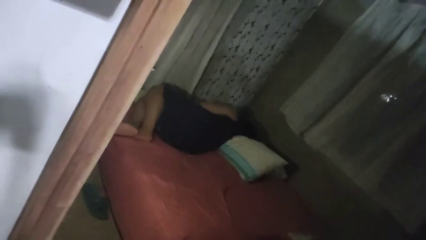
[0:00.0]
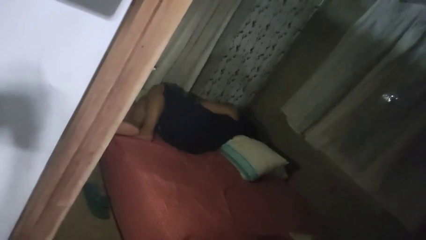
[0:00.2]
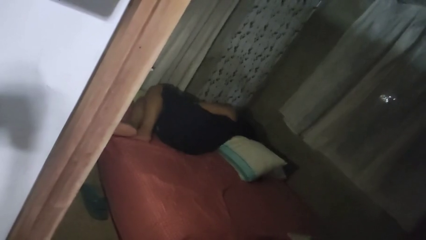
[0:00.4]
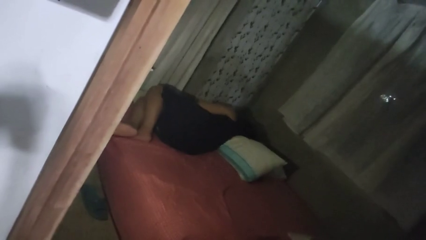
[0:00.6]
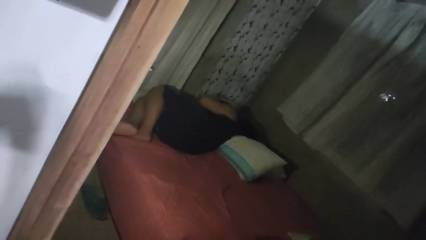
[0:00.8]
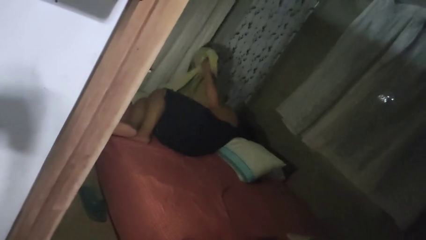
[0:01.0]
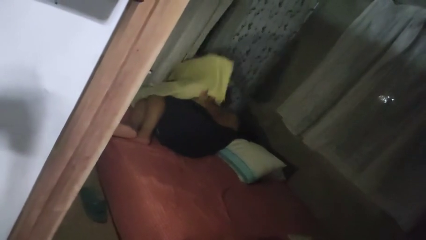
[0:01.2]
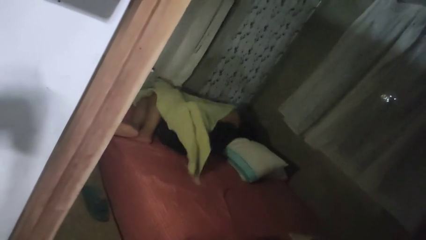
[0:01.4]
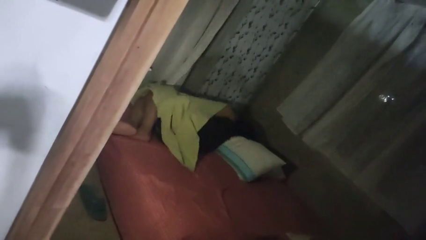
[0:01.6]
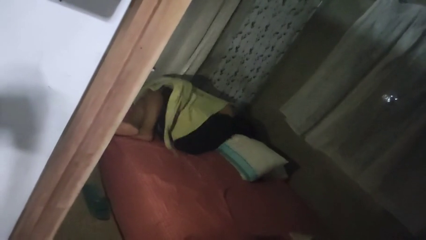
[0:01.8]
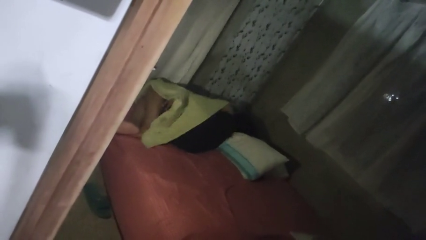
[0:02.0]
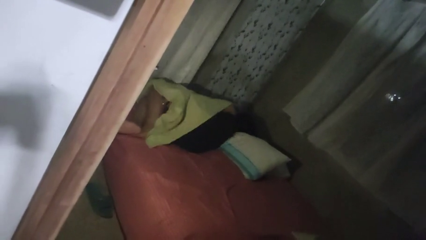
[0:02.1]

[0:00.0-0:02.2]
person covers with bedsheets

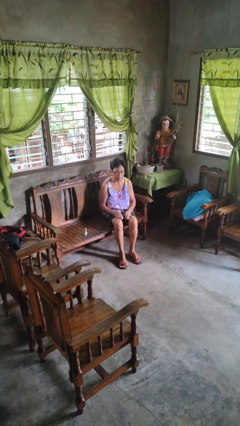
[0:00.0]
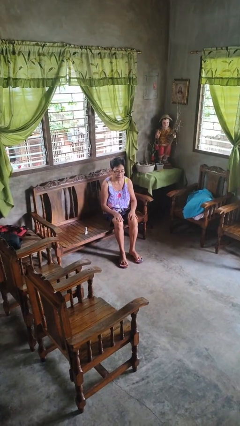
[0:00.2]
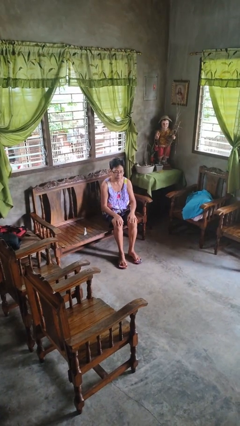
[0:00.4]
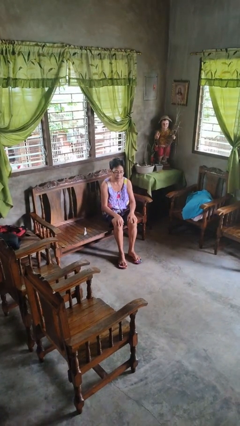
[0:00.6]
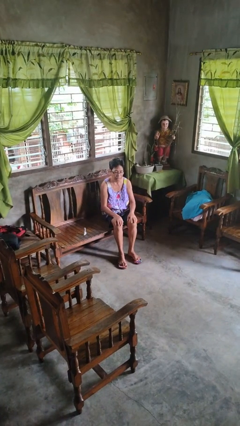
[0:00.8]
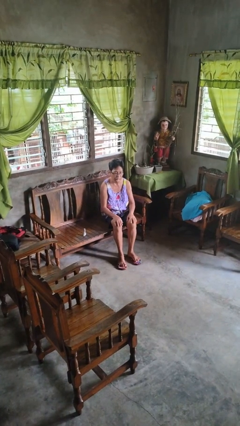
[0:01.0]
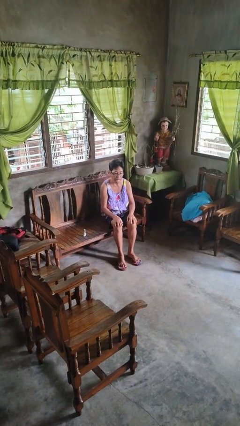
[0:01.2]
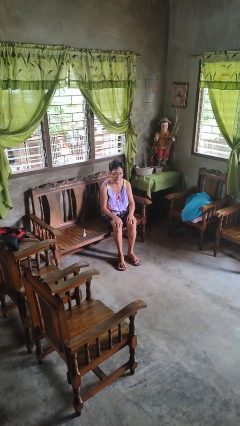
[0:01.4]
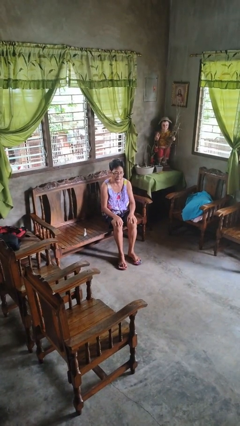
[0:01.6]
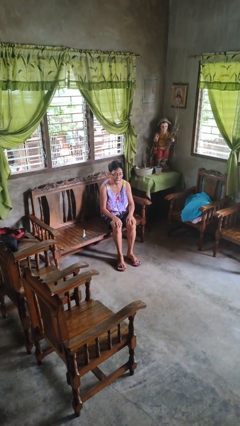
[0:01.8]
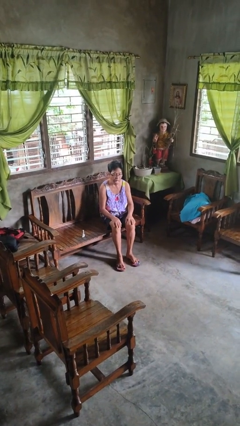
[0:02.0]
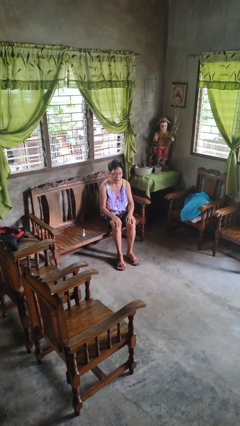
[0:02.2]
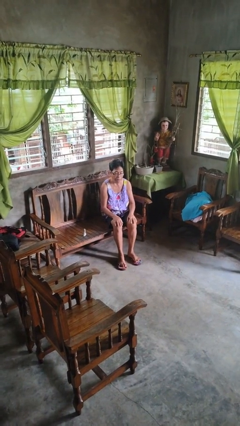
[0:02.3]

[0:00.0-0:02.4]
person sticks out tongue

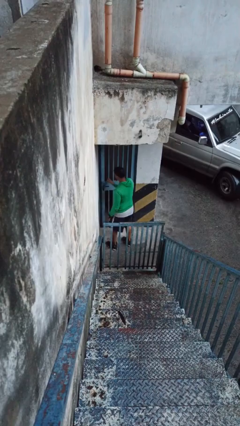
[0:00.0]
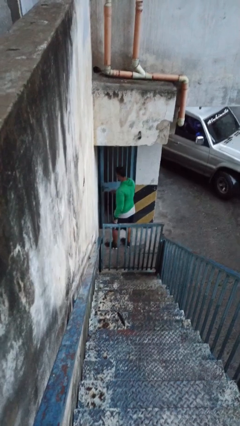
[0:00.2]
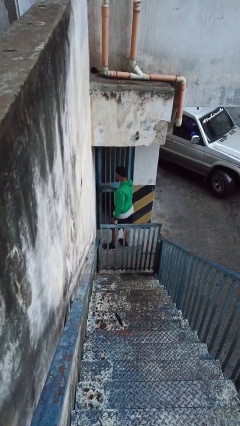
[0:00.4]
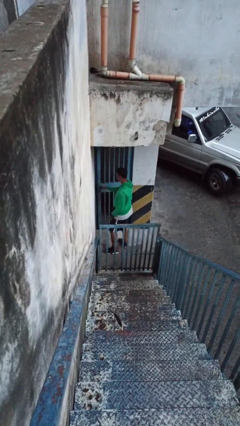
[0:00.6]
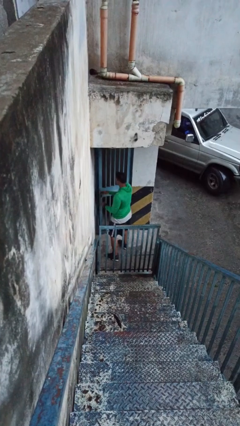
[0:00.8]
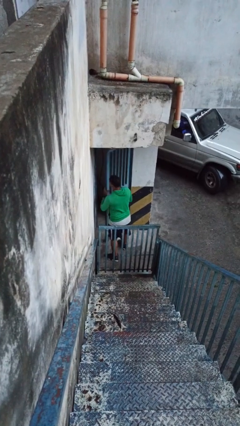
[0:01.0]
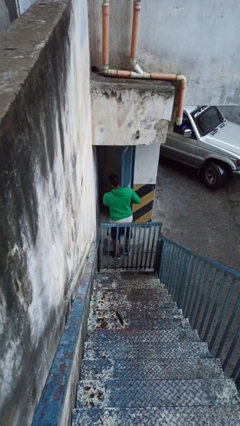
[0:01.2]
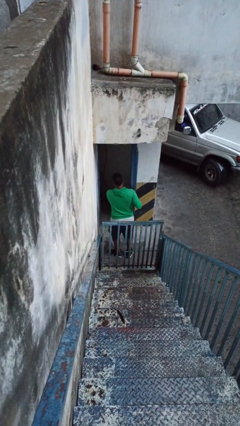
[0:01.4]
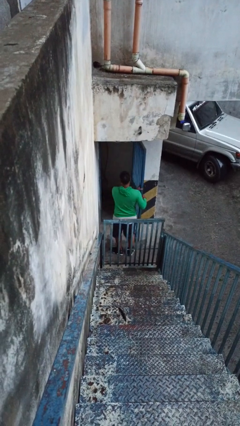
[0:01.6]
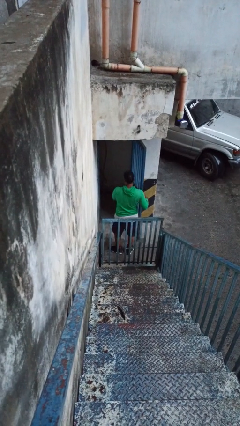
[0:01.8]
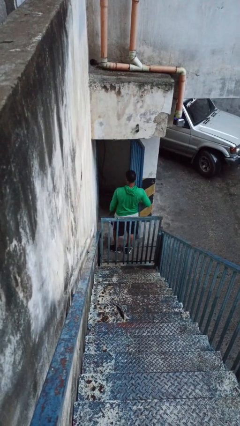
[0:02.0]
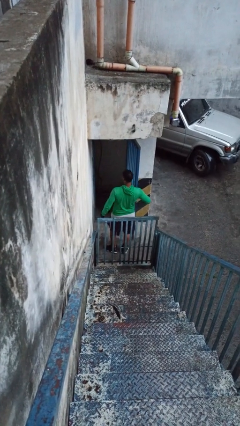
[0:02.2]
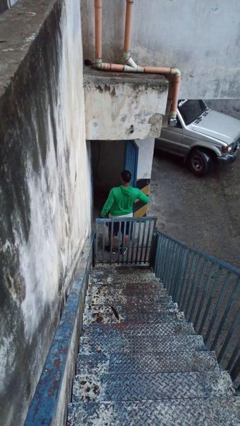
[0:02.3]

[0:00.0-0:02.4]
person opens facility door

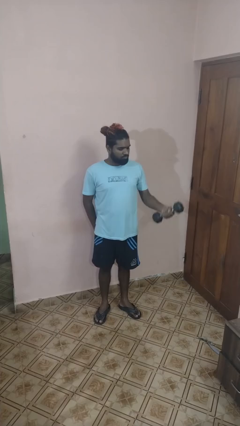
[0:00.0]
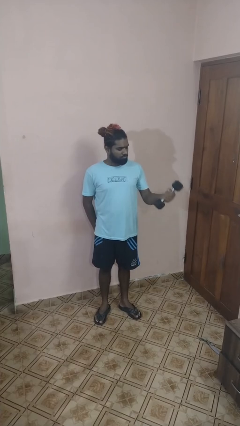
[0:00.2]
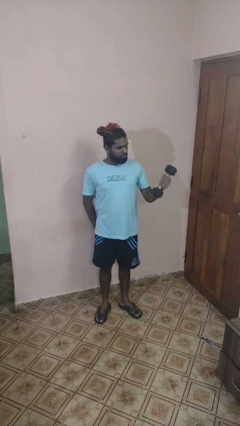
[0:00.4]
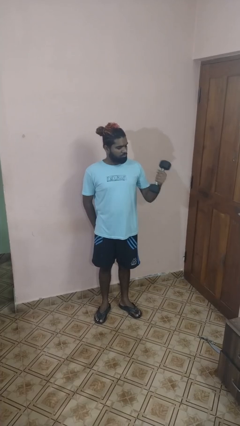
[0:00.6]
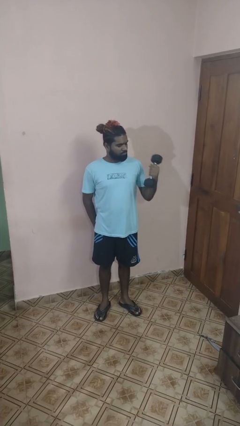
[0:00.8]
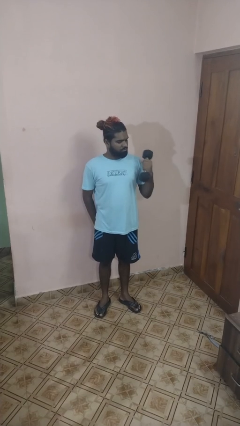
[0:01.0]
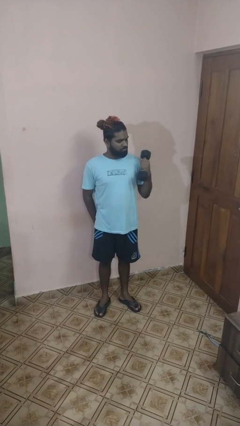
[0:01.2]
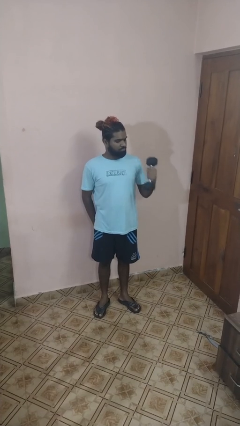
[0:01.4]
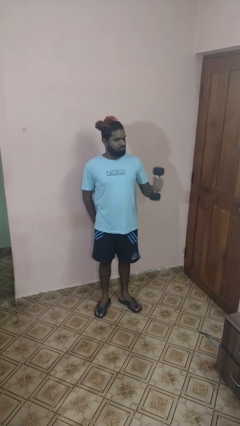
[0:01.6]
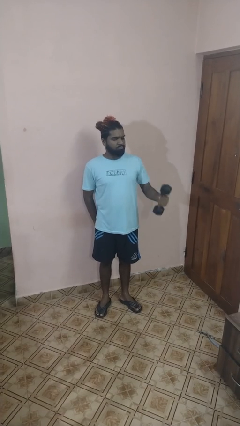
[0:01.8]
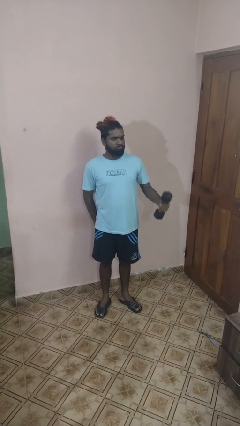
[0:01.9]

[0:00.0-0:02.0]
person lifts dumbbells

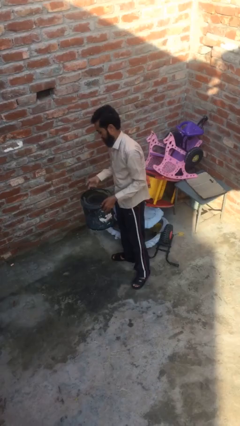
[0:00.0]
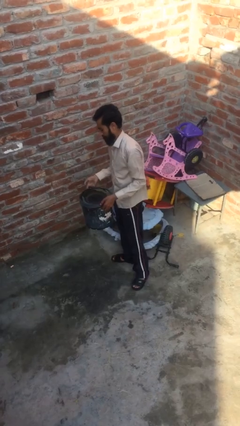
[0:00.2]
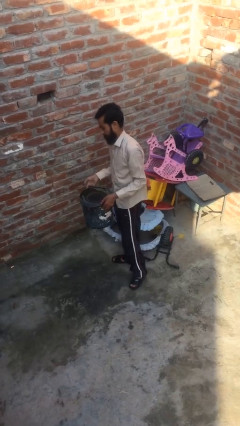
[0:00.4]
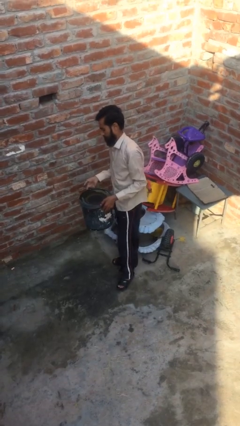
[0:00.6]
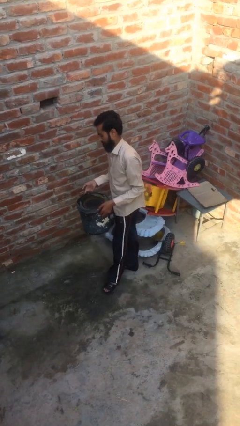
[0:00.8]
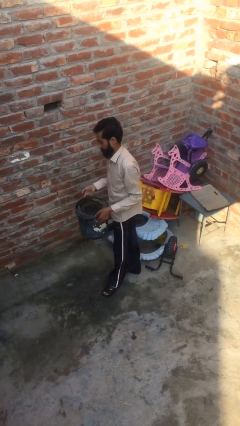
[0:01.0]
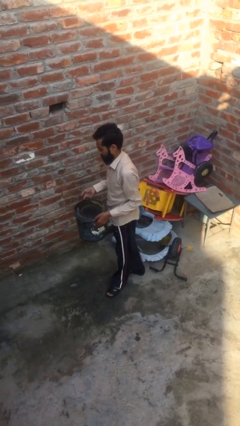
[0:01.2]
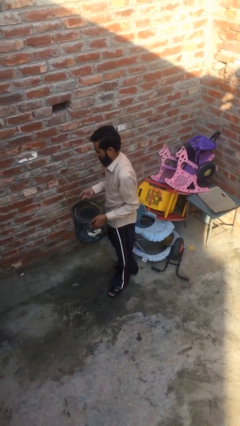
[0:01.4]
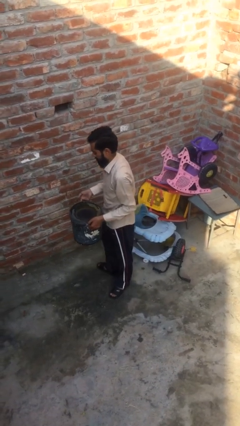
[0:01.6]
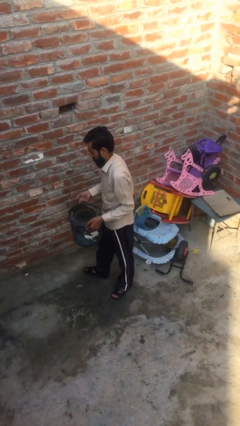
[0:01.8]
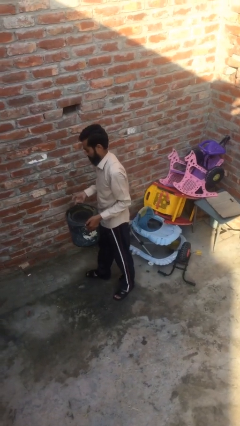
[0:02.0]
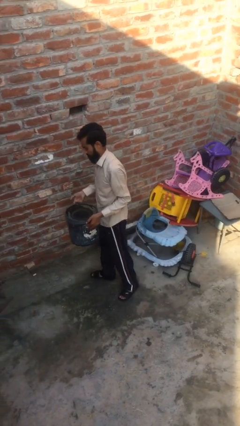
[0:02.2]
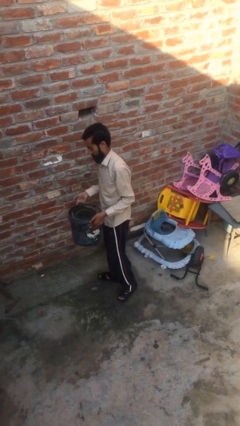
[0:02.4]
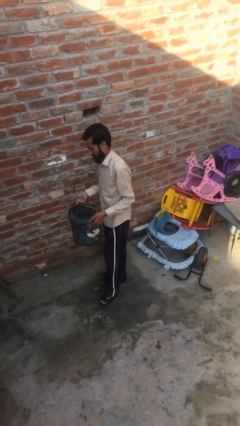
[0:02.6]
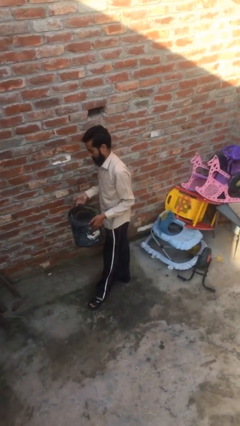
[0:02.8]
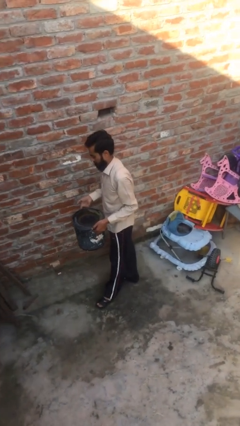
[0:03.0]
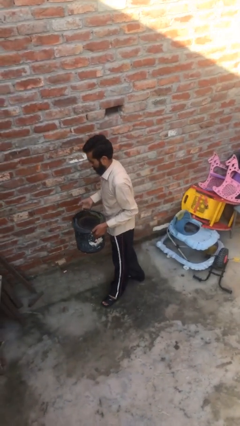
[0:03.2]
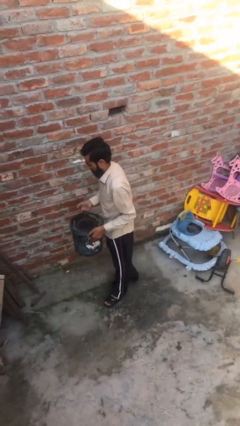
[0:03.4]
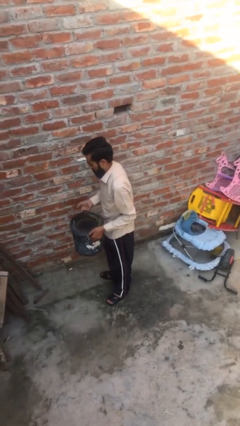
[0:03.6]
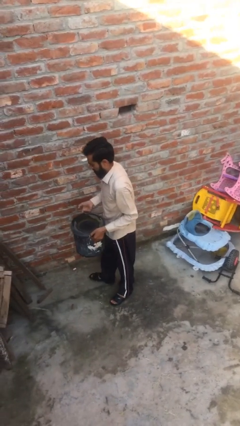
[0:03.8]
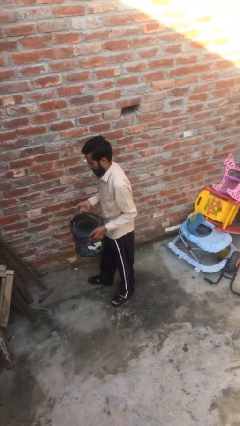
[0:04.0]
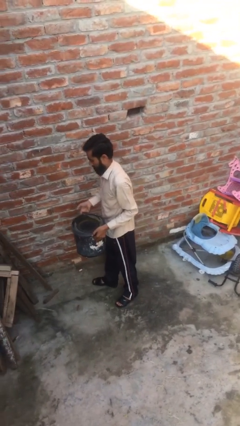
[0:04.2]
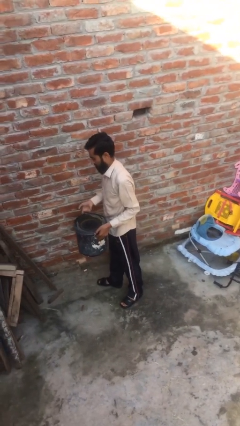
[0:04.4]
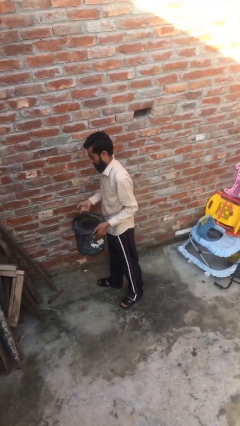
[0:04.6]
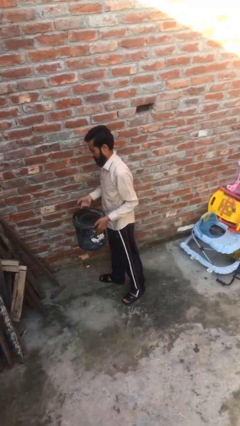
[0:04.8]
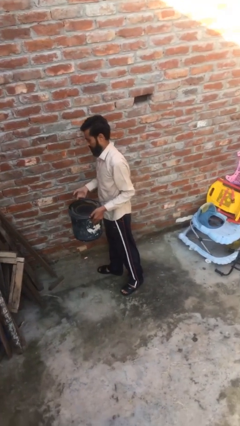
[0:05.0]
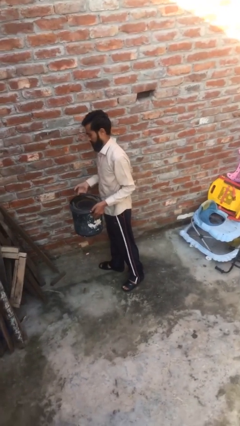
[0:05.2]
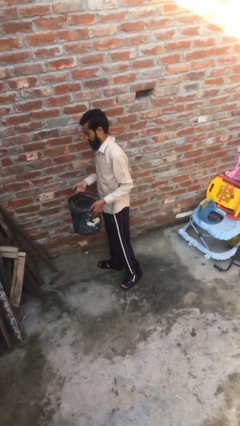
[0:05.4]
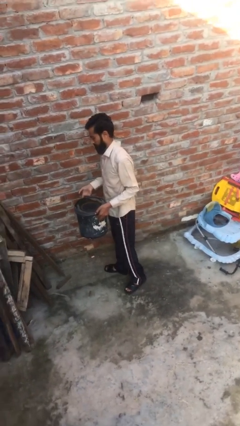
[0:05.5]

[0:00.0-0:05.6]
person carries heavy object

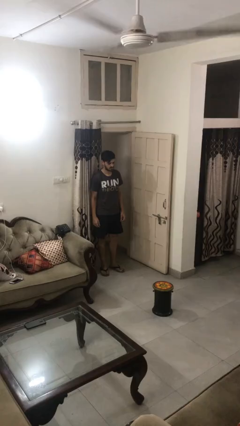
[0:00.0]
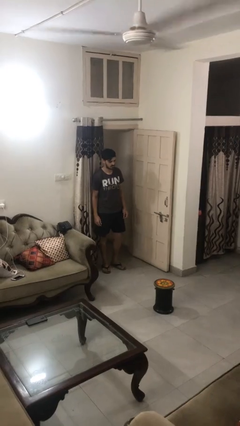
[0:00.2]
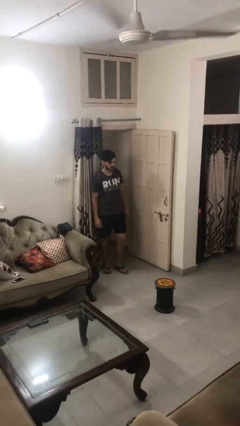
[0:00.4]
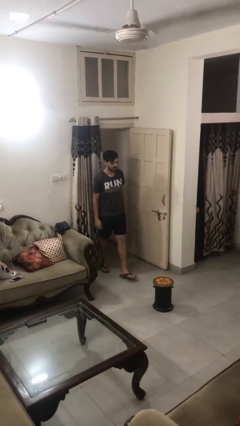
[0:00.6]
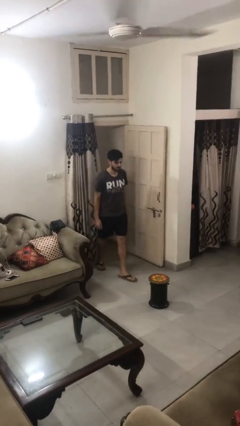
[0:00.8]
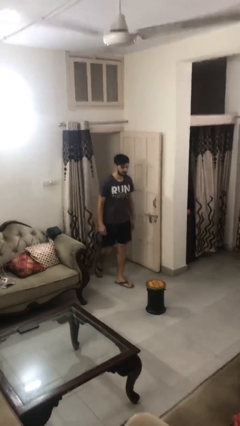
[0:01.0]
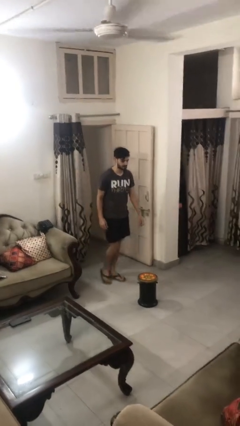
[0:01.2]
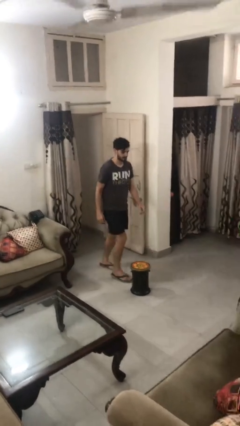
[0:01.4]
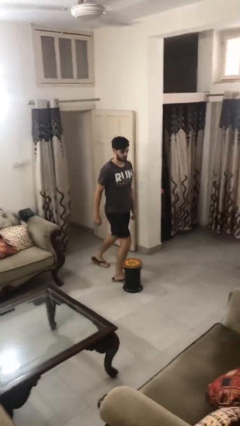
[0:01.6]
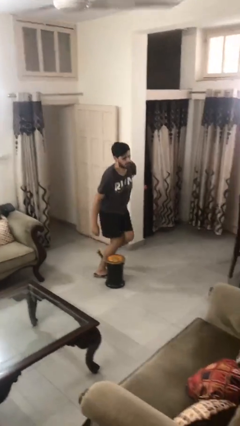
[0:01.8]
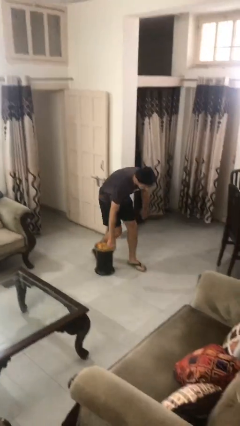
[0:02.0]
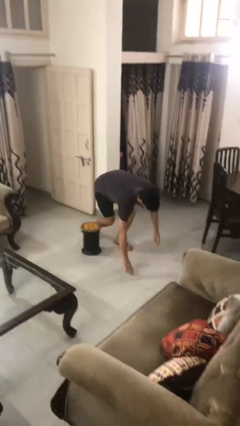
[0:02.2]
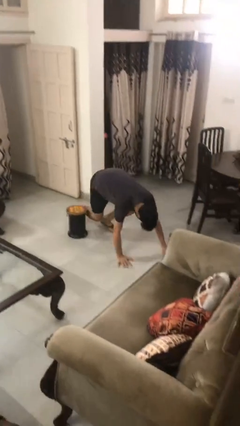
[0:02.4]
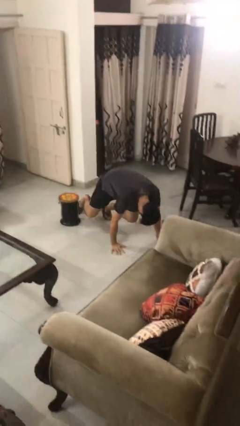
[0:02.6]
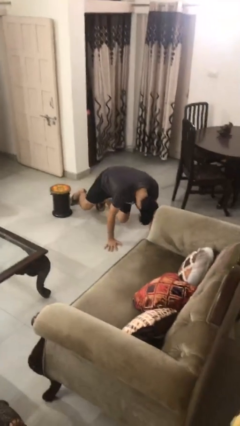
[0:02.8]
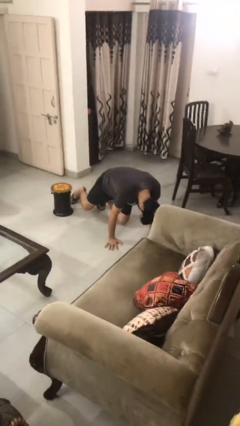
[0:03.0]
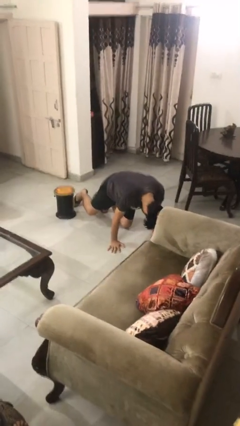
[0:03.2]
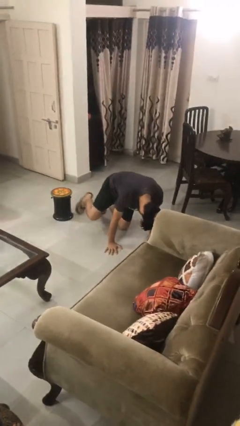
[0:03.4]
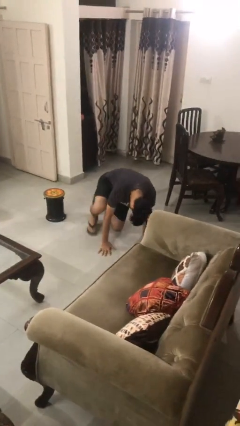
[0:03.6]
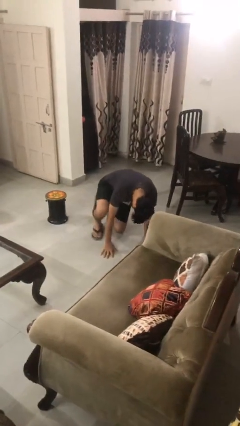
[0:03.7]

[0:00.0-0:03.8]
person trips on object on floor
